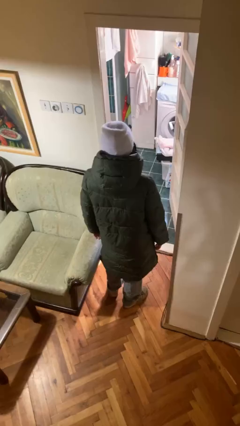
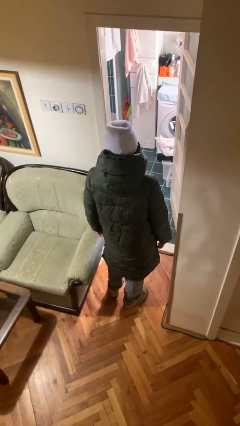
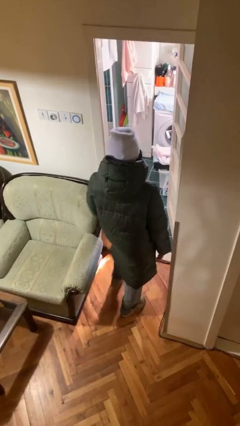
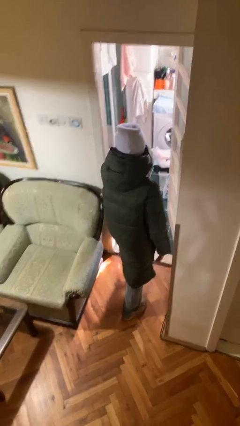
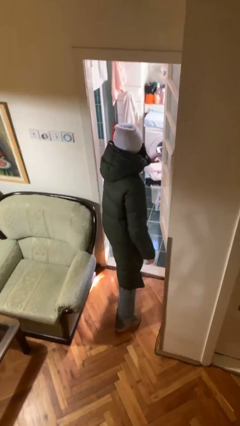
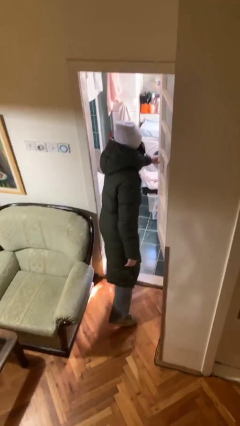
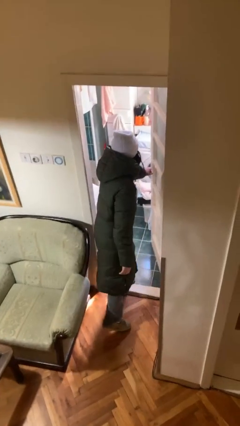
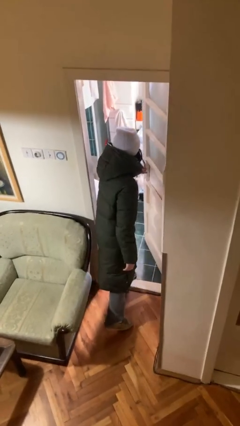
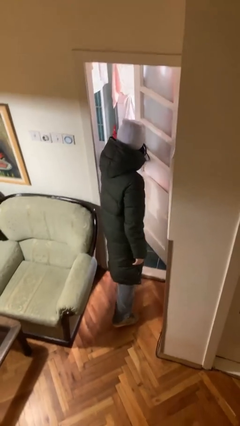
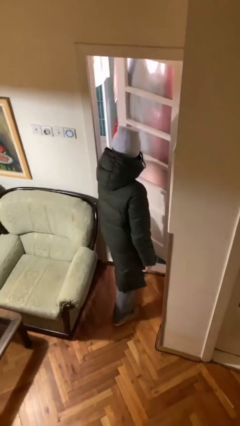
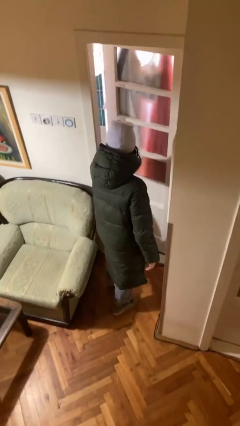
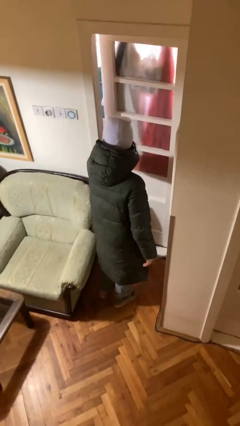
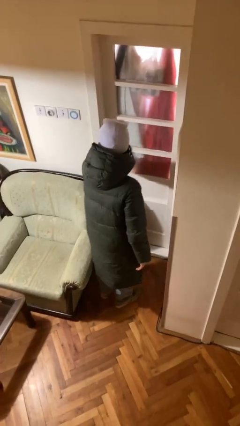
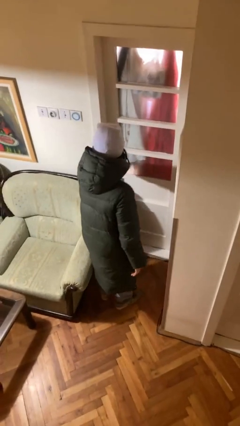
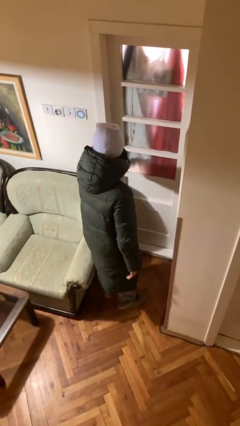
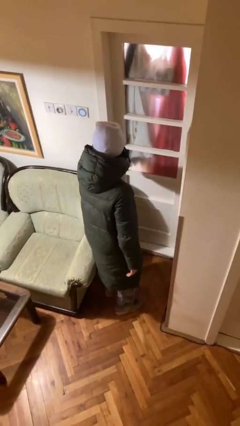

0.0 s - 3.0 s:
person closes facility door

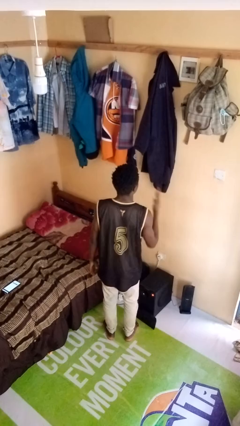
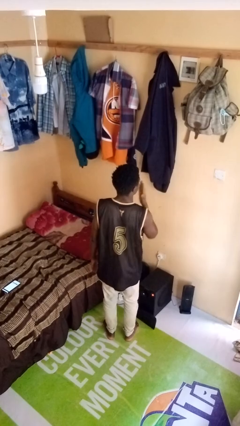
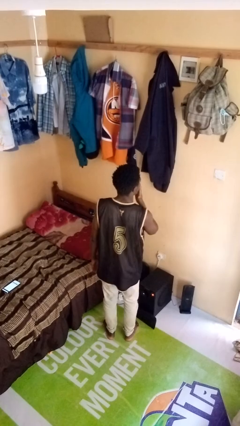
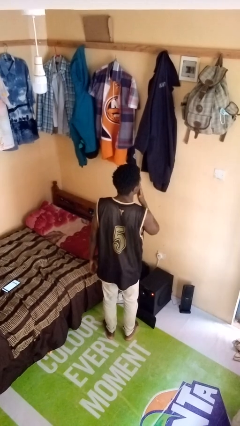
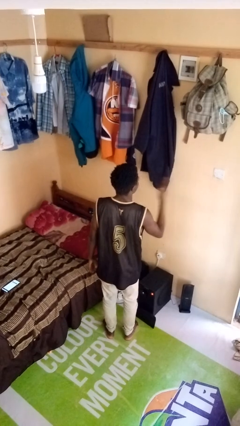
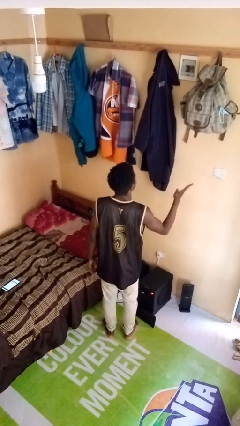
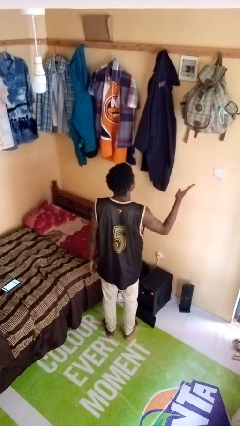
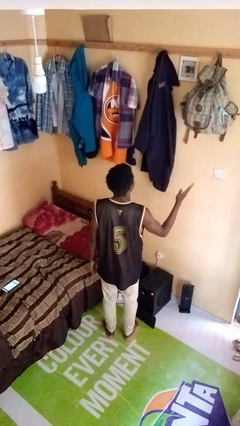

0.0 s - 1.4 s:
person gestures blow kiss

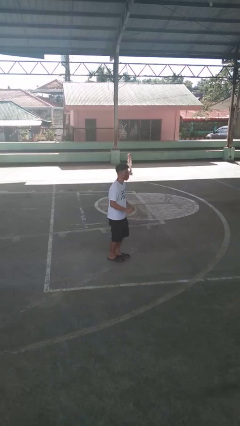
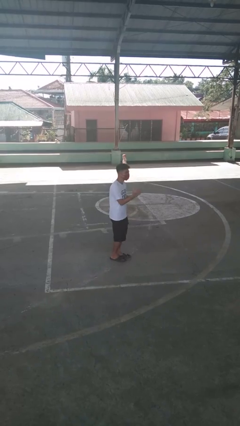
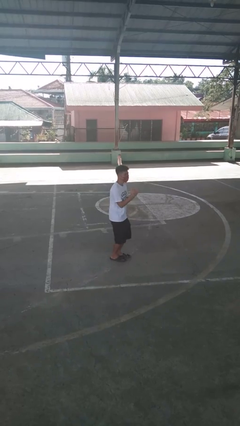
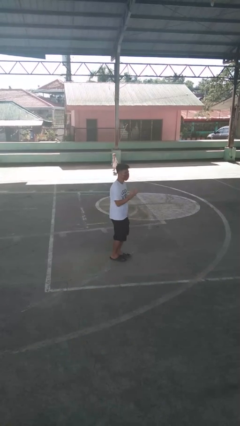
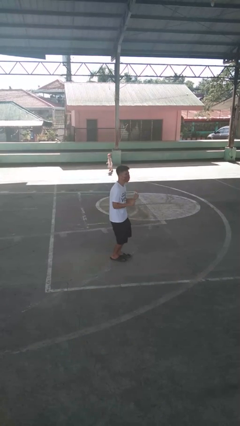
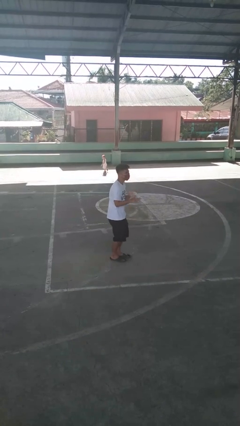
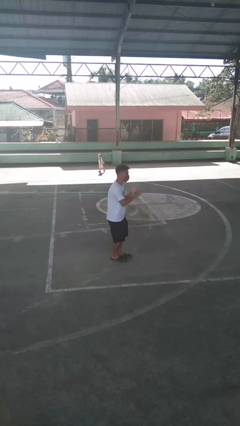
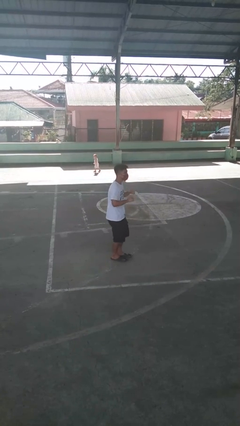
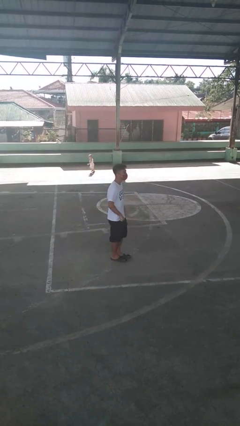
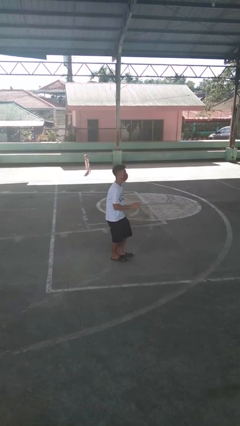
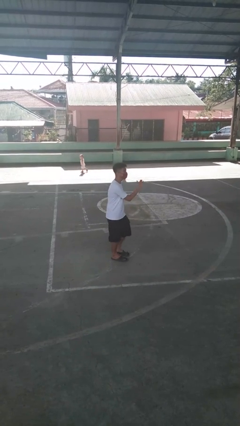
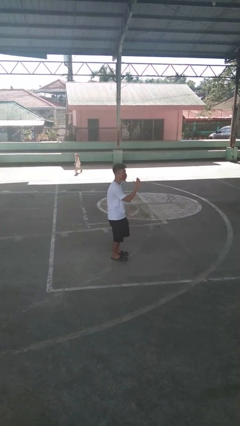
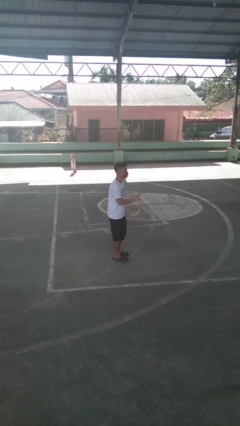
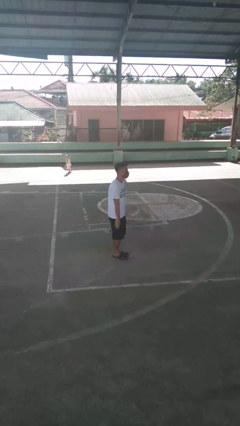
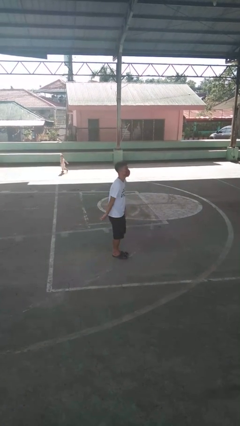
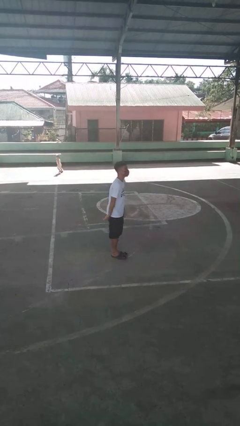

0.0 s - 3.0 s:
person dances in place

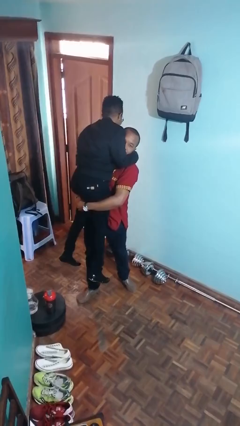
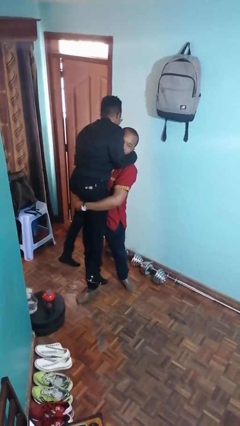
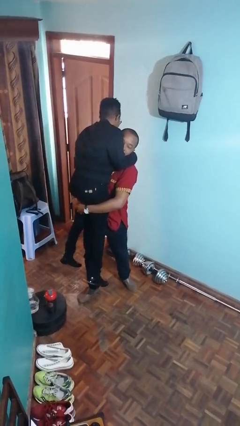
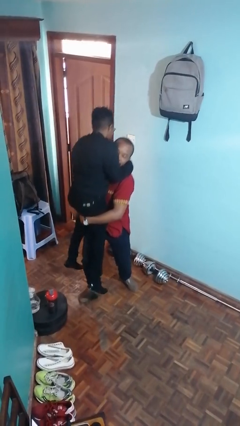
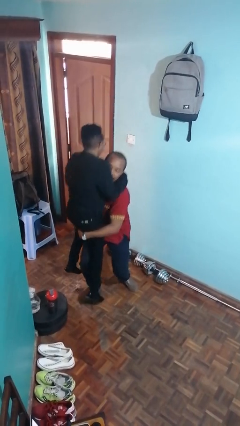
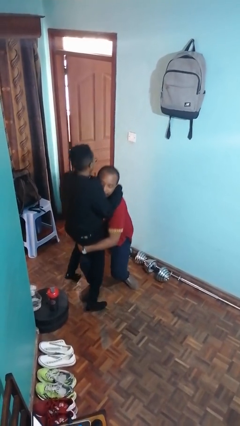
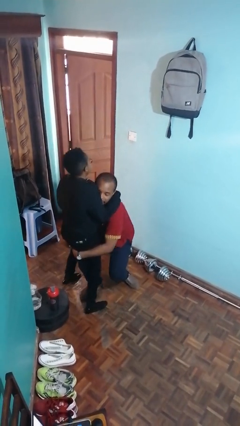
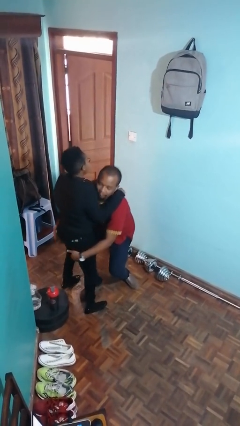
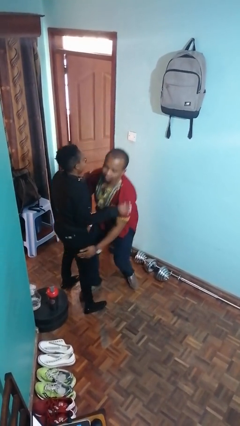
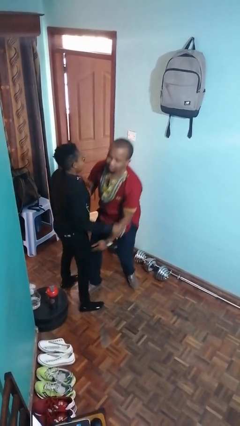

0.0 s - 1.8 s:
person puts down person

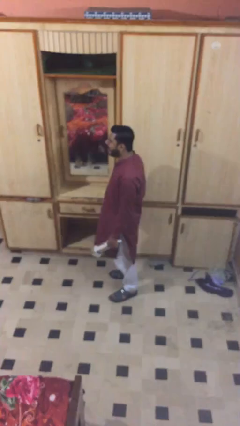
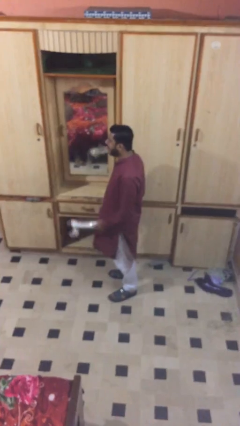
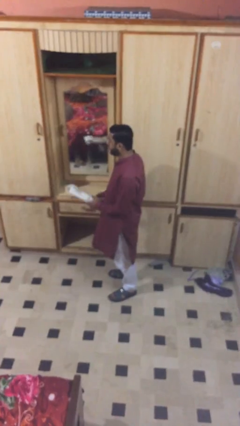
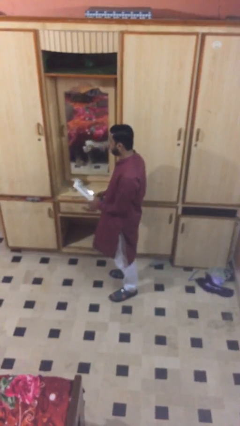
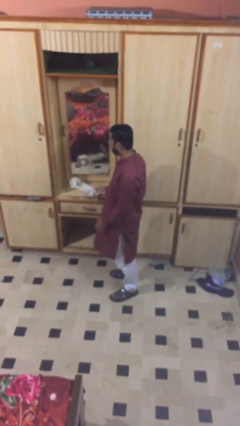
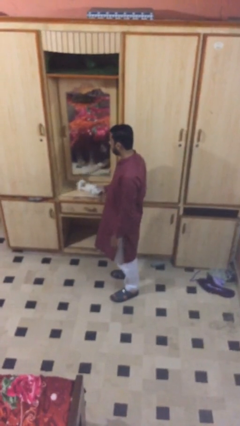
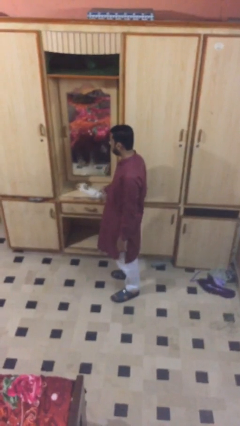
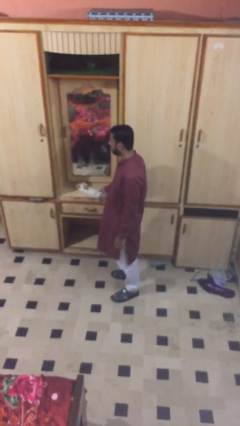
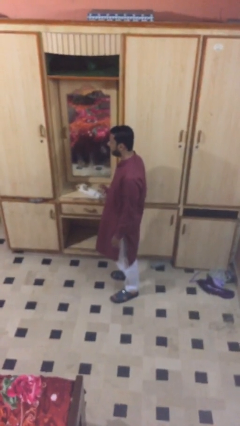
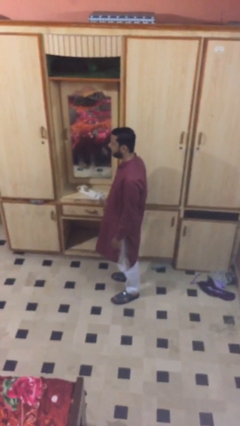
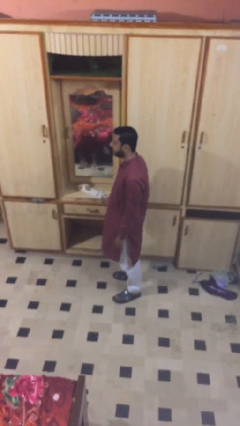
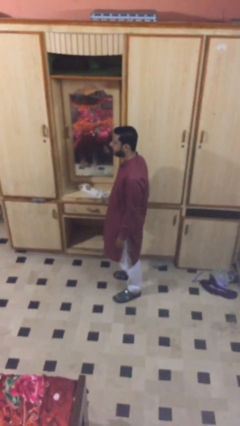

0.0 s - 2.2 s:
person puts down object on table

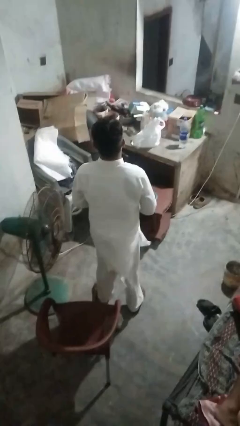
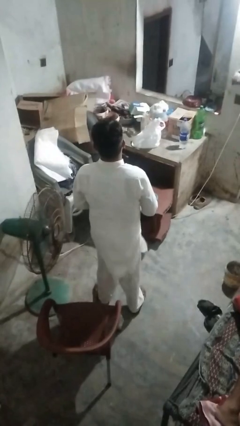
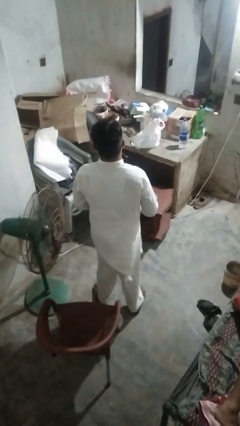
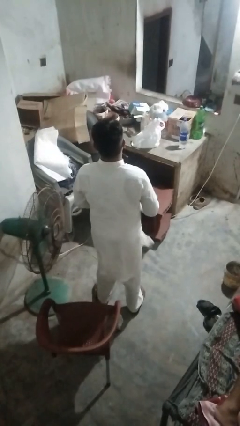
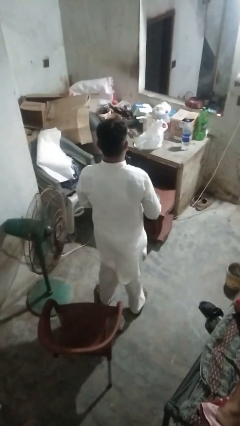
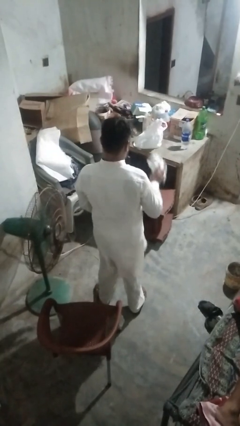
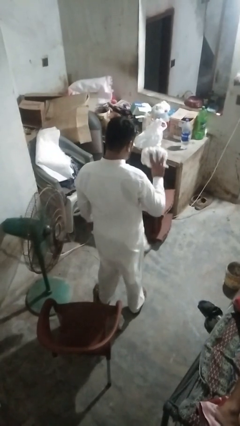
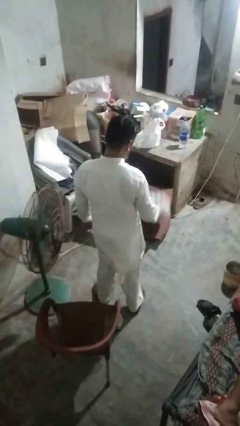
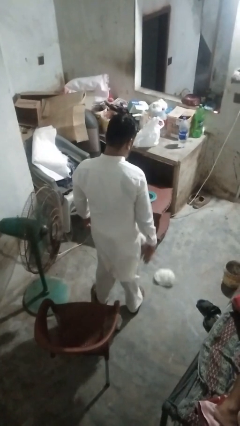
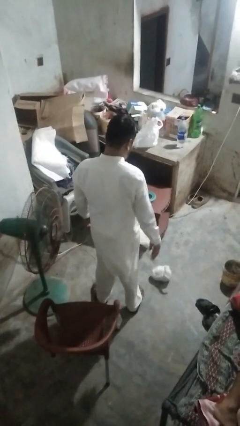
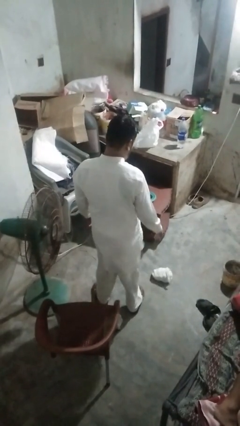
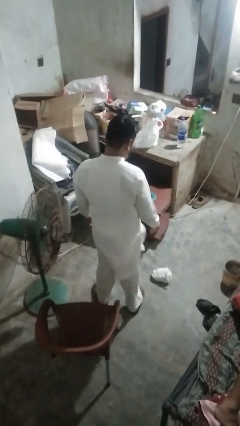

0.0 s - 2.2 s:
person throws object to ground

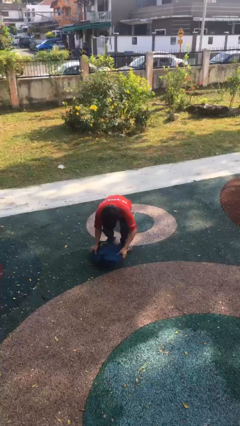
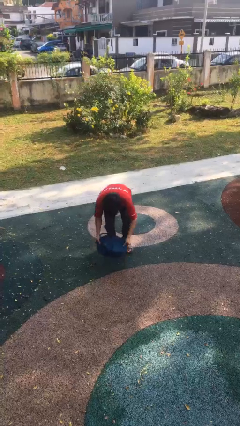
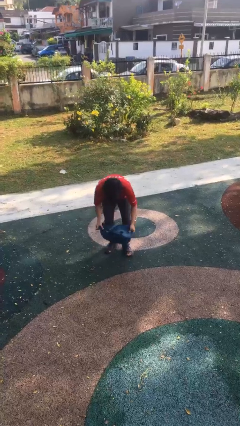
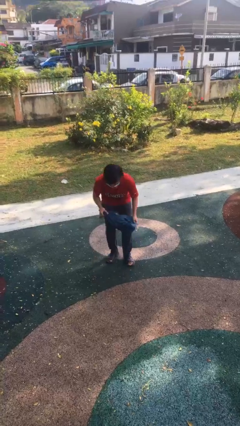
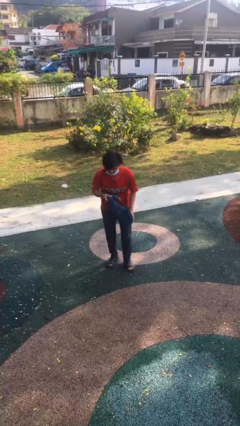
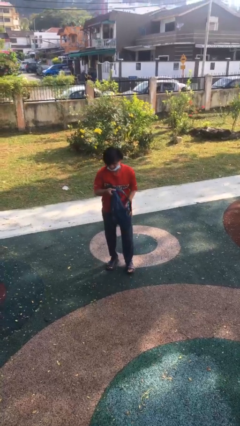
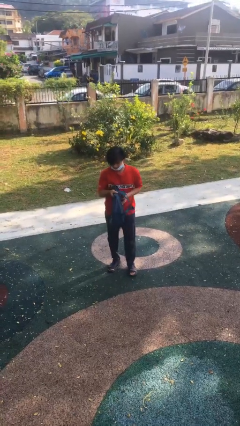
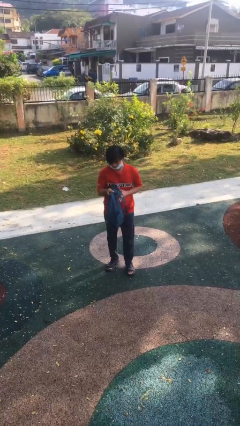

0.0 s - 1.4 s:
person picks up object from floor

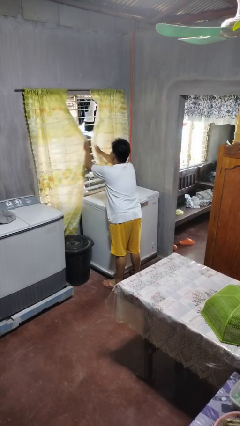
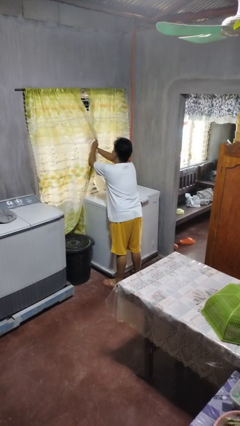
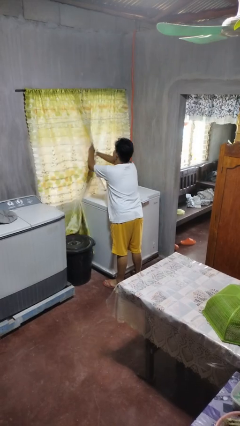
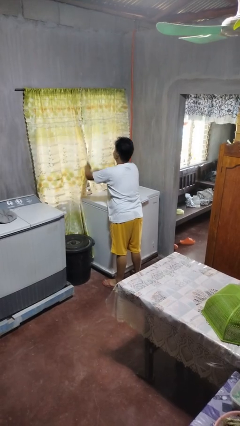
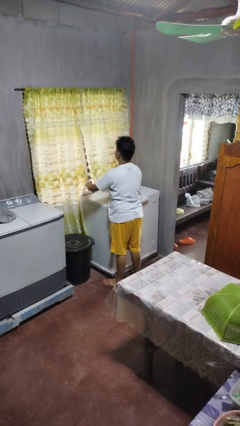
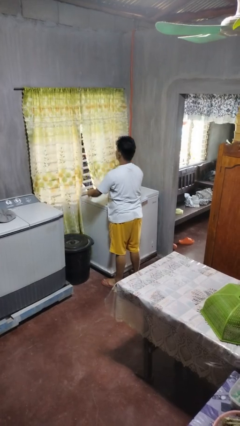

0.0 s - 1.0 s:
person closes curtains

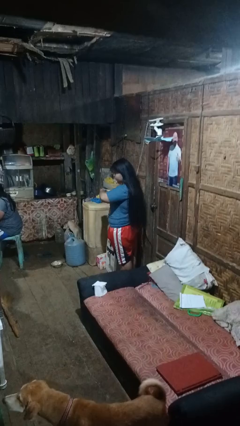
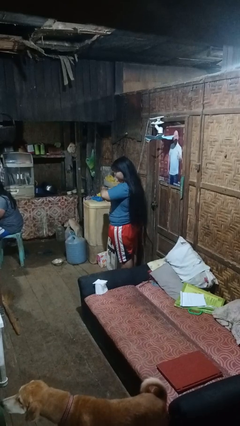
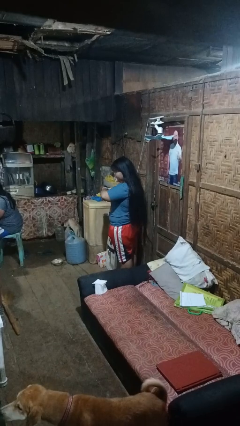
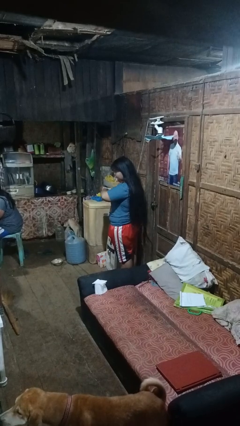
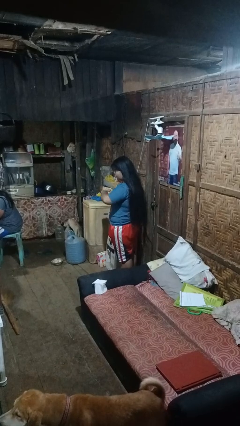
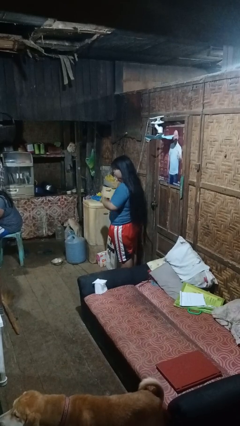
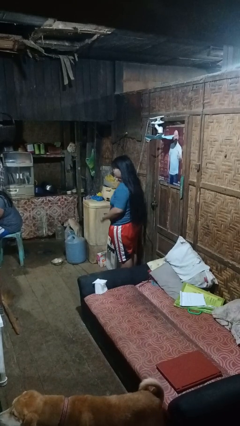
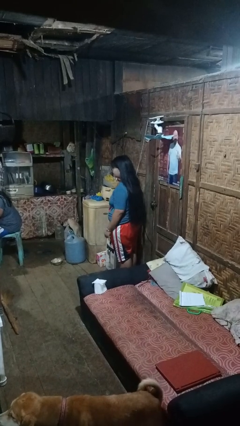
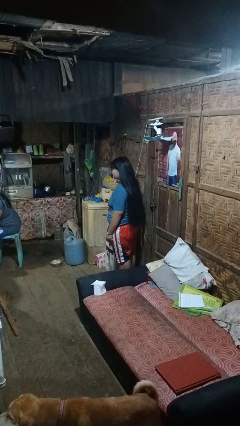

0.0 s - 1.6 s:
person looks at wristwatch
